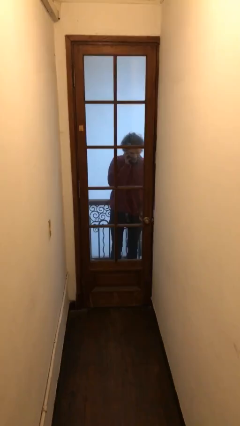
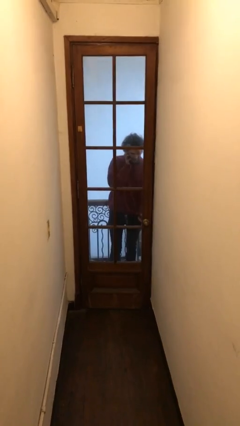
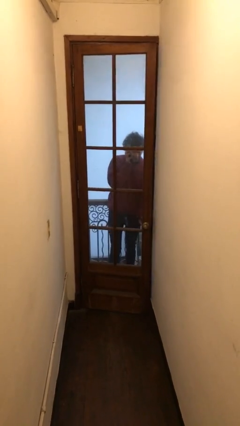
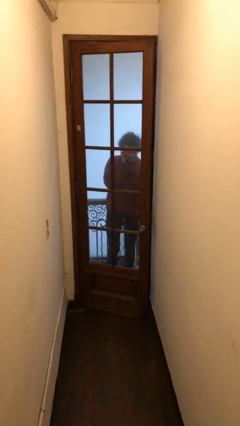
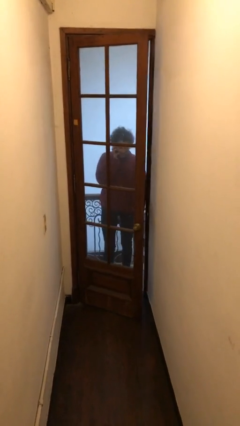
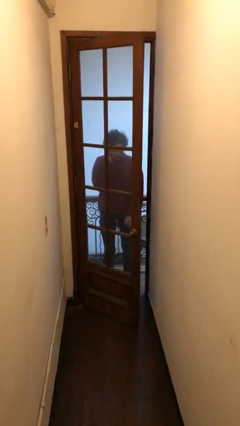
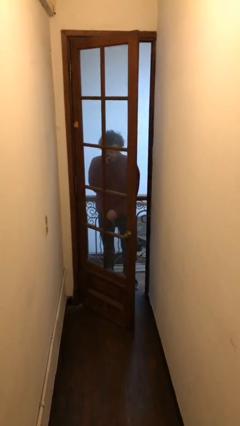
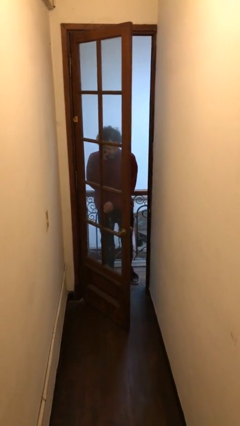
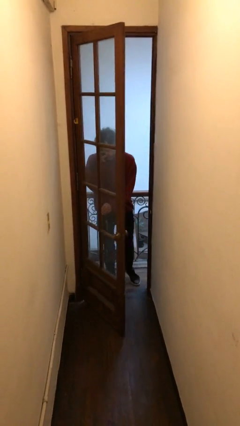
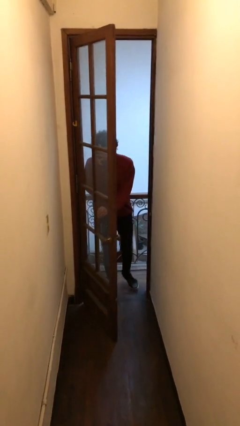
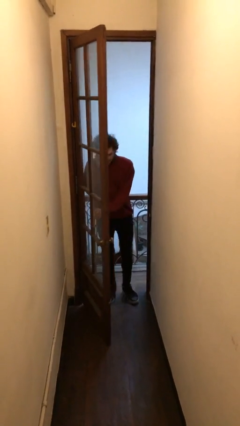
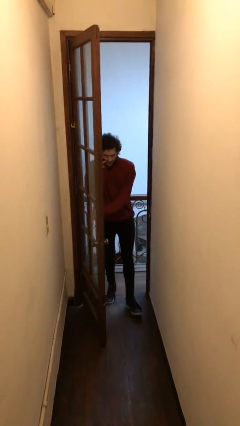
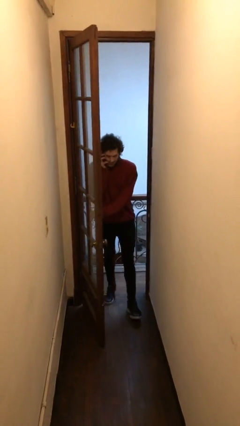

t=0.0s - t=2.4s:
person opens facility door

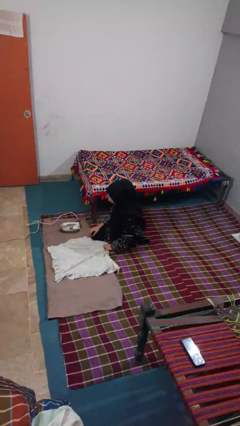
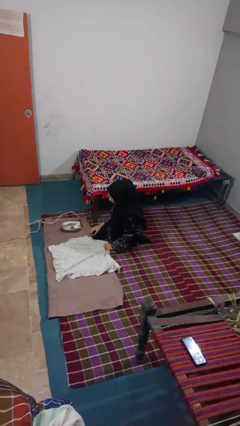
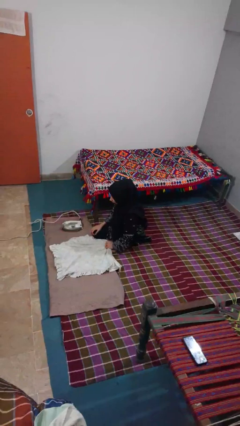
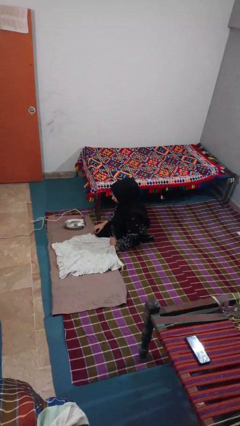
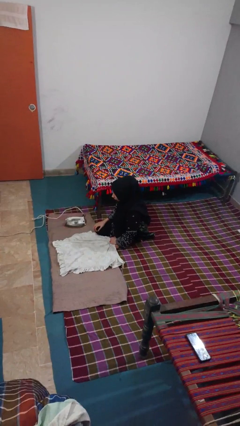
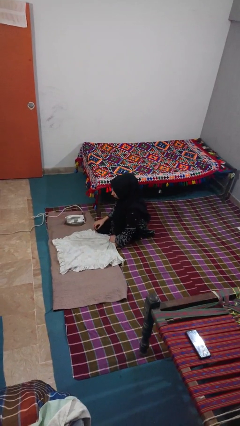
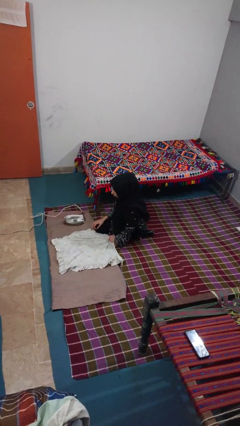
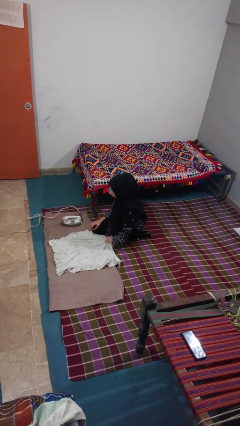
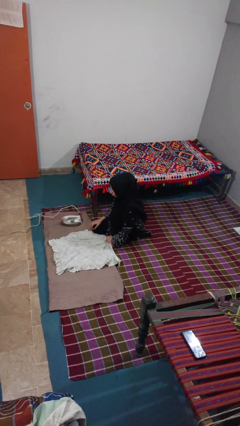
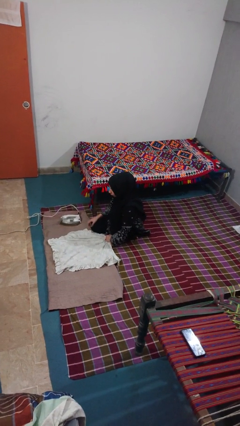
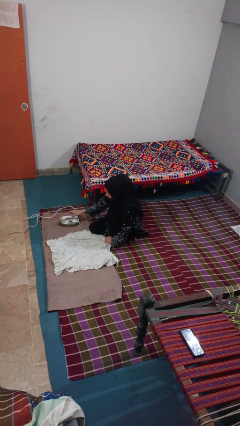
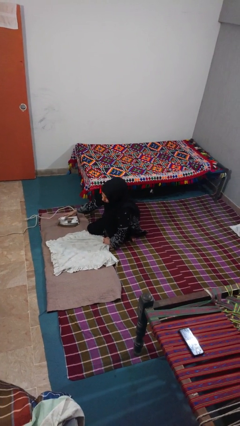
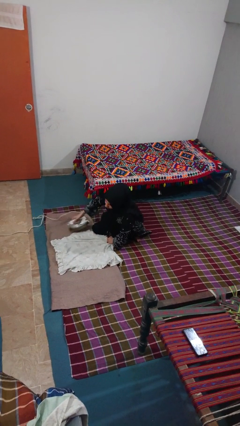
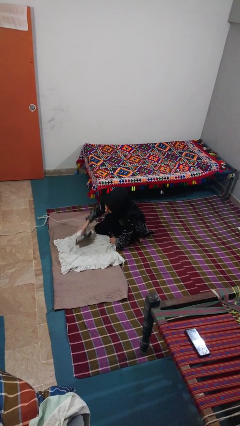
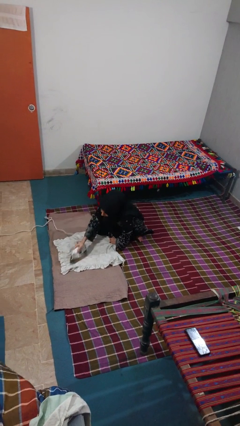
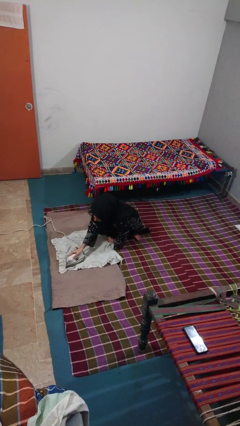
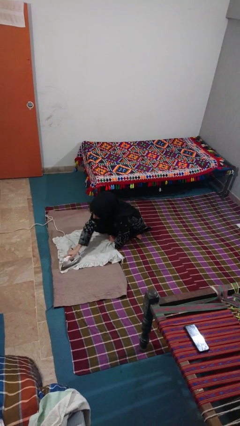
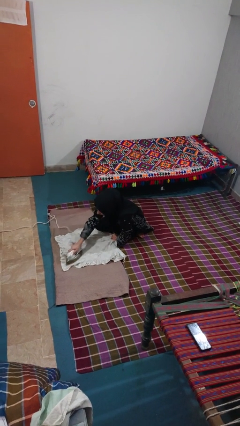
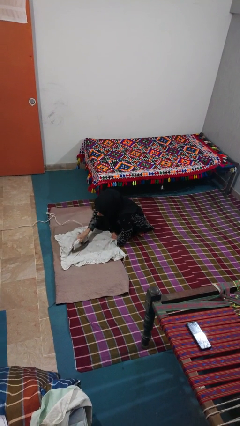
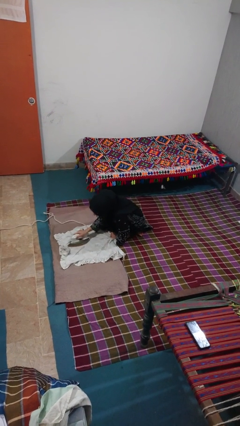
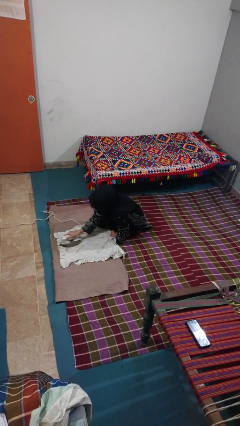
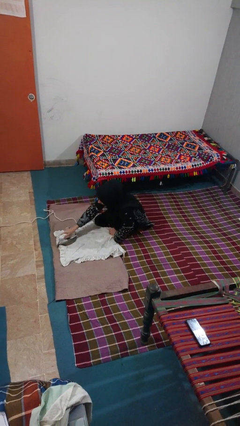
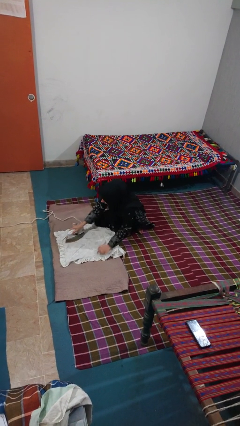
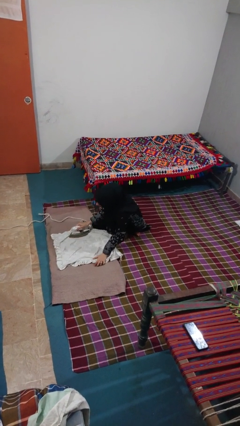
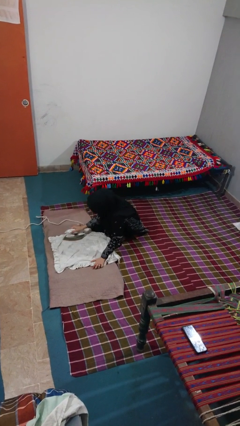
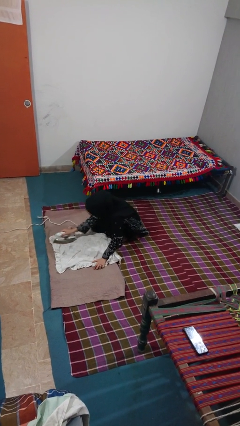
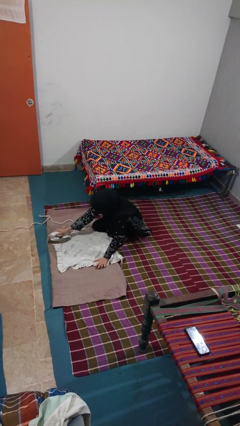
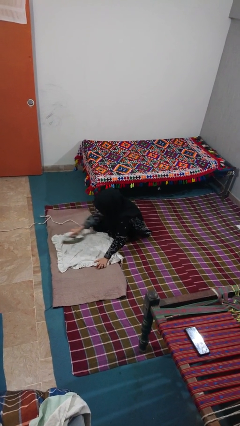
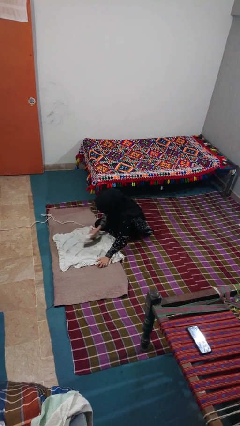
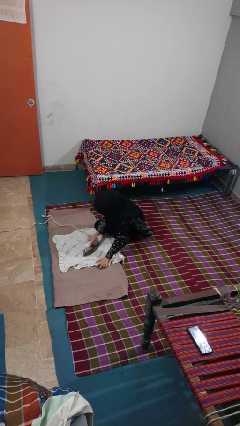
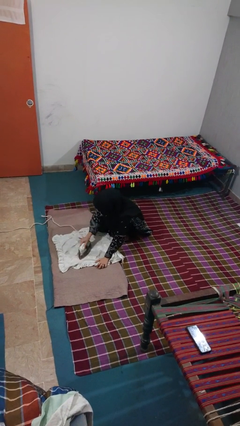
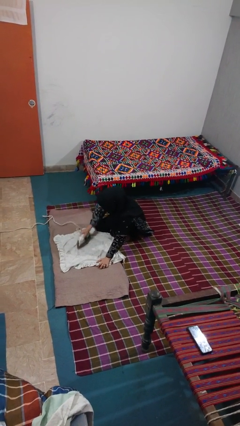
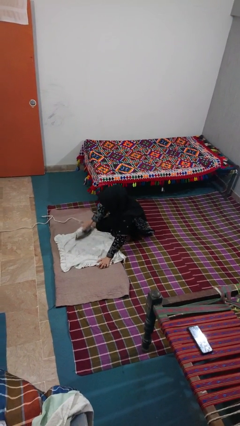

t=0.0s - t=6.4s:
person irons clothes

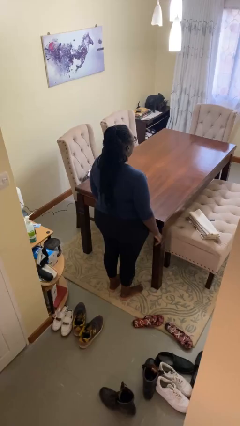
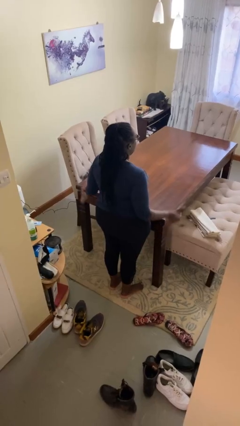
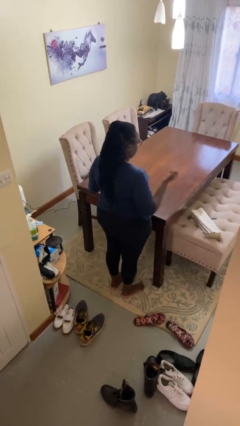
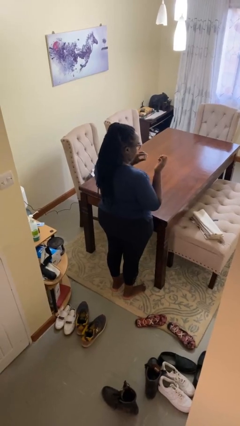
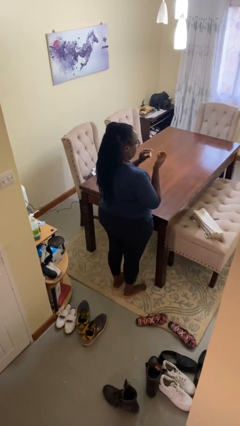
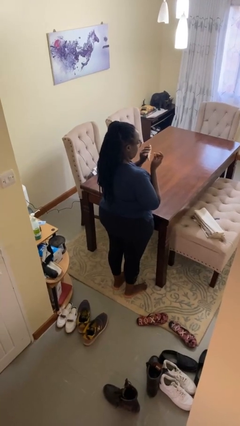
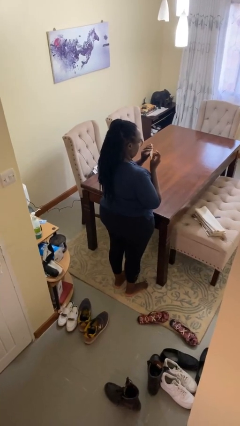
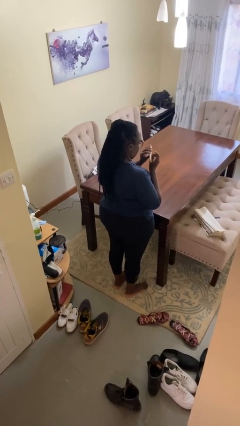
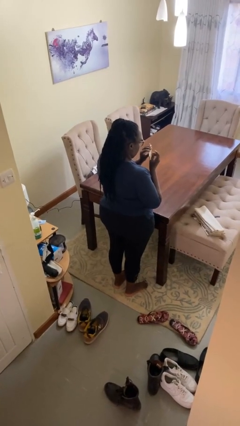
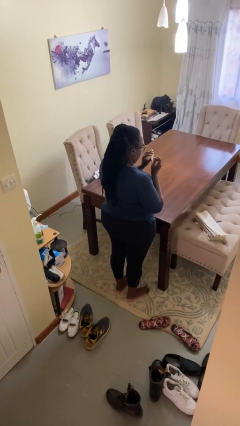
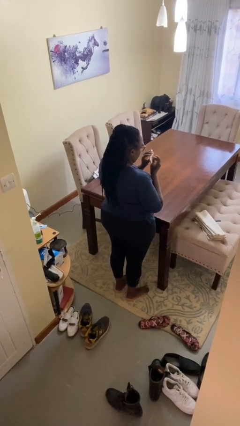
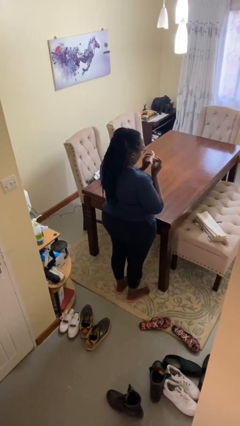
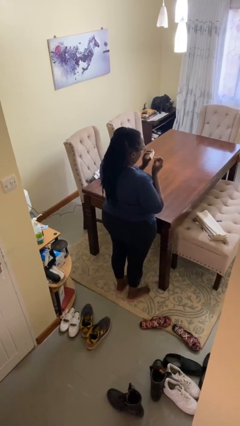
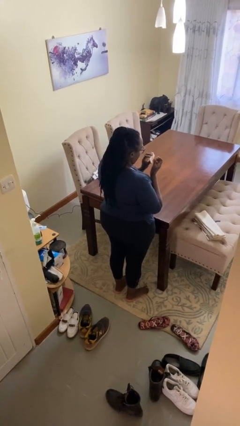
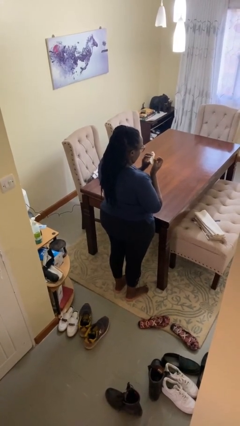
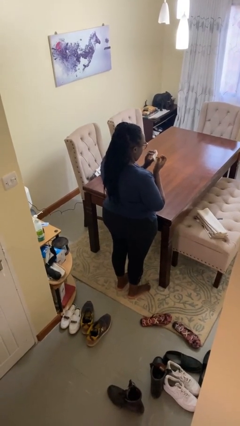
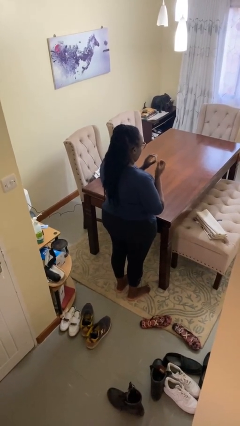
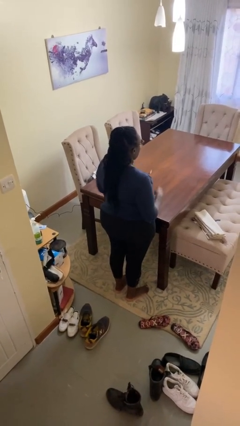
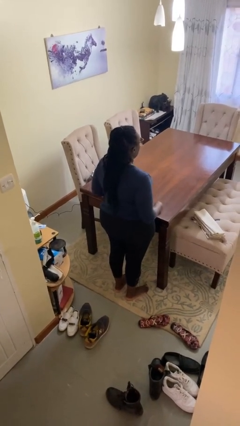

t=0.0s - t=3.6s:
person files fingernails

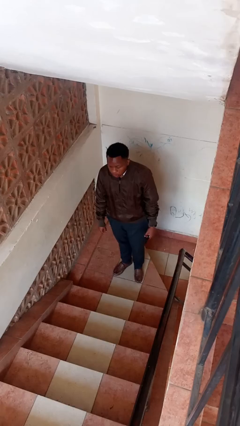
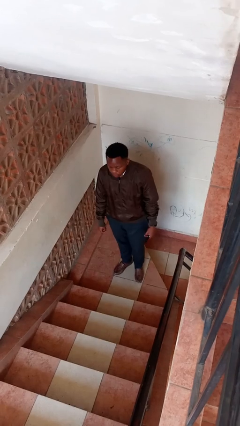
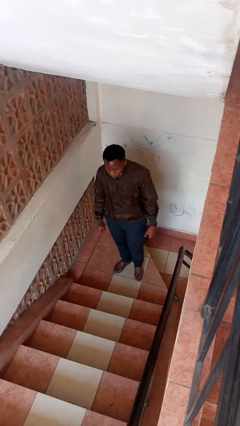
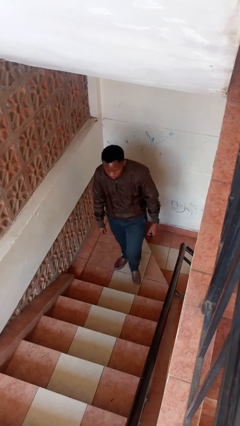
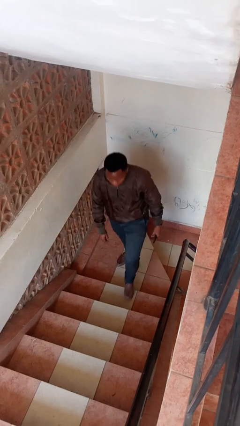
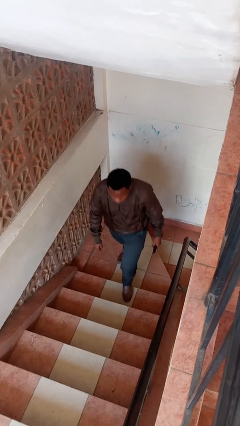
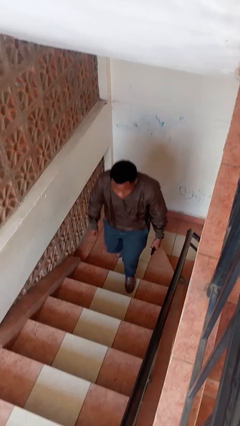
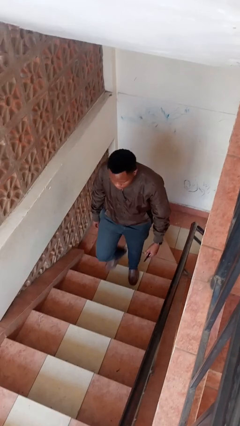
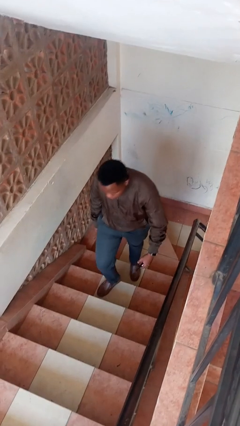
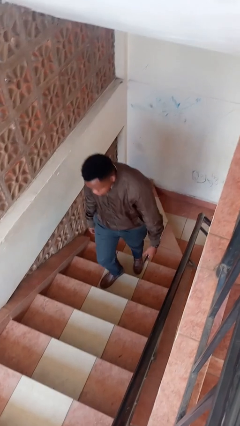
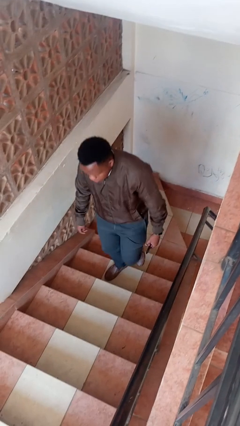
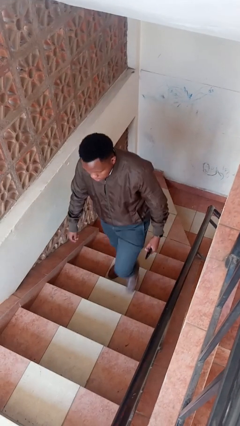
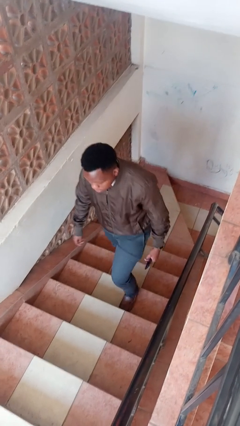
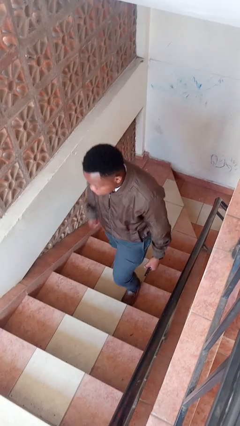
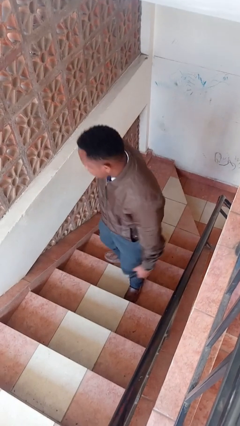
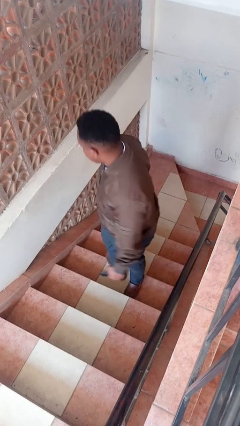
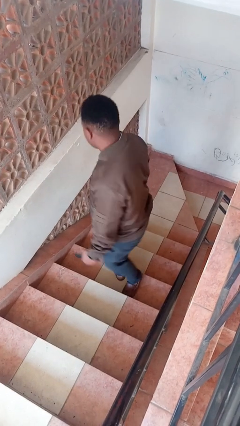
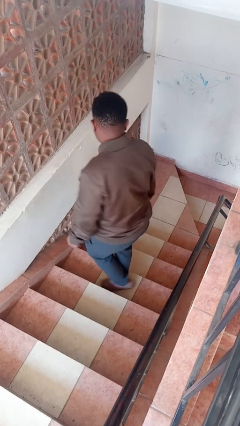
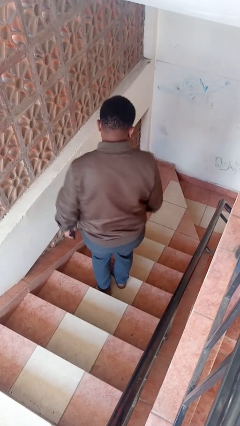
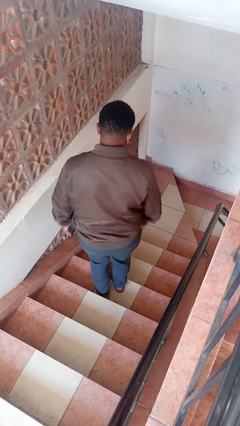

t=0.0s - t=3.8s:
person climbs up stairs

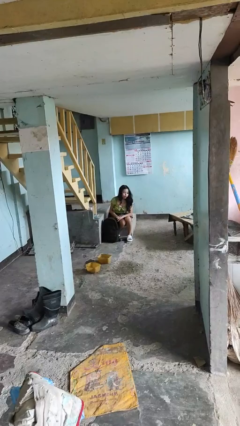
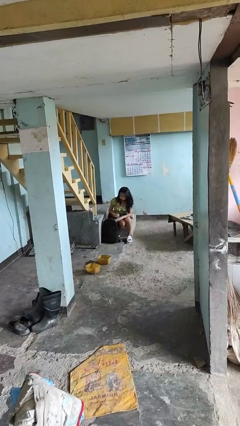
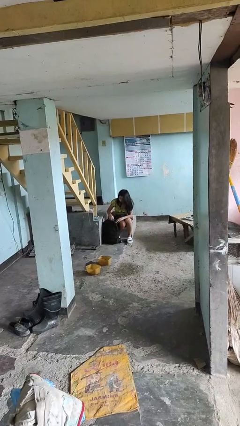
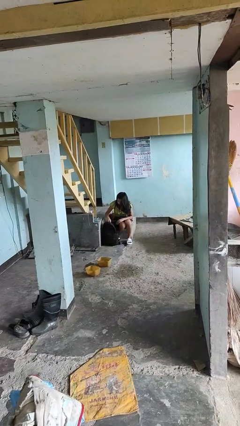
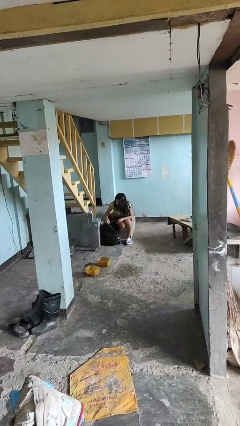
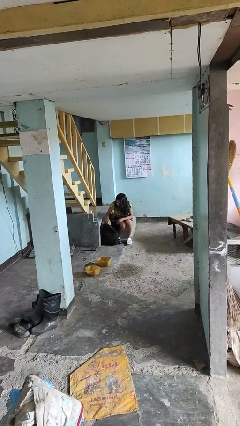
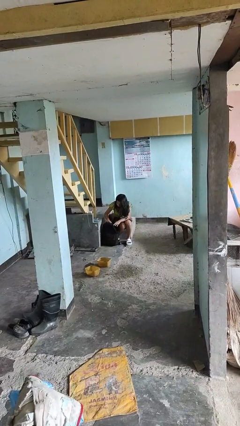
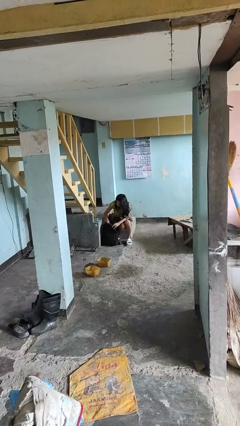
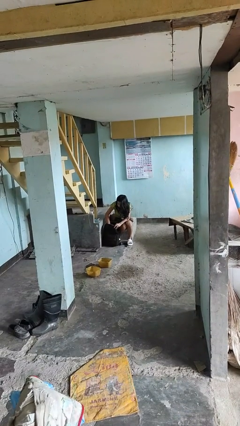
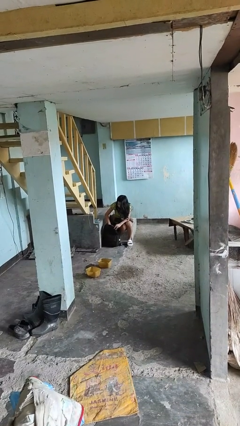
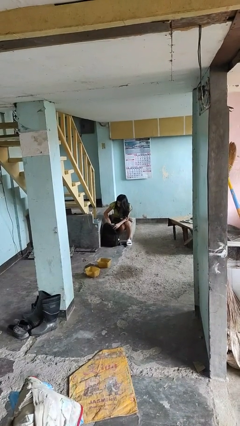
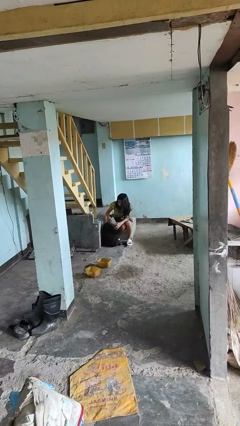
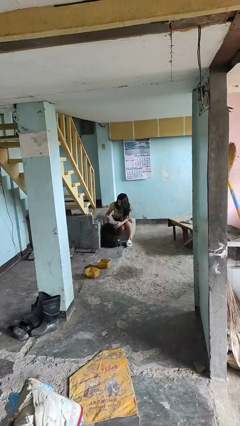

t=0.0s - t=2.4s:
person searches in backpack
